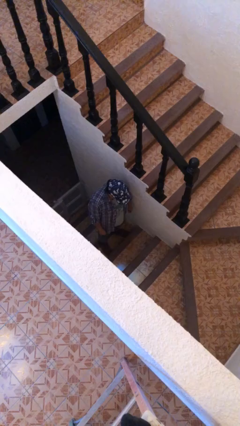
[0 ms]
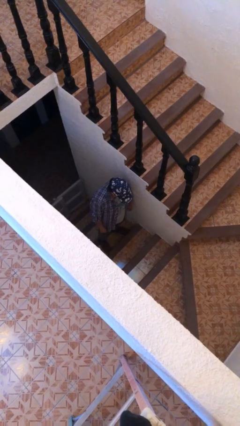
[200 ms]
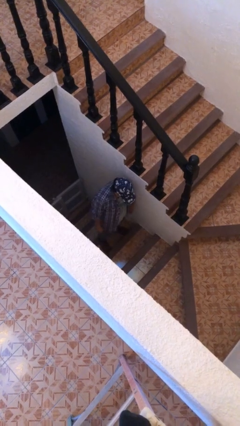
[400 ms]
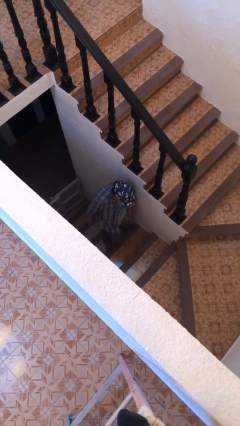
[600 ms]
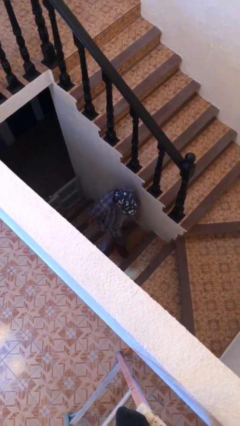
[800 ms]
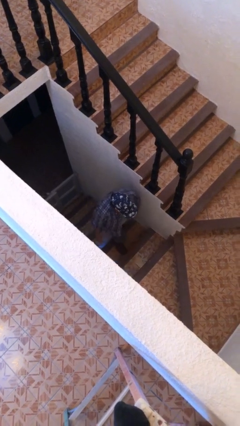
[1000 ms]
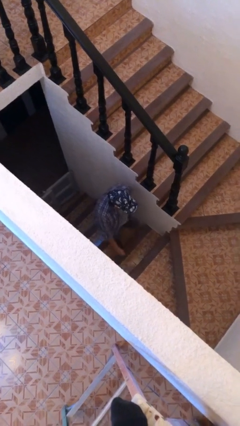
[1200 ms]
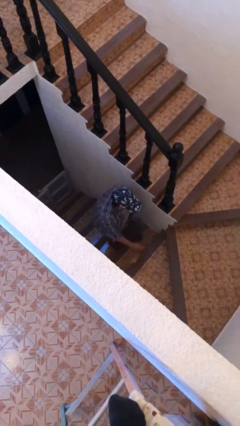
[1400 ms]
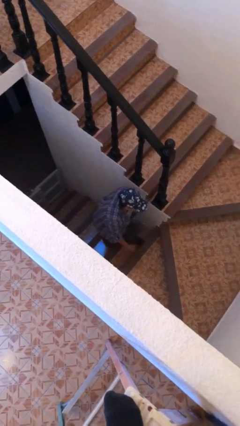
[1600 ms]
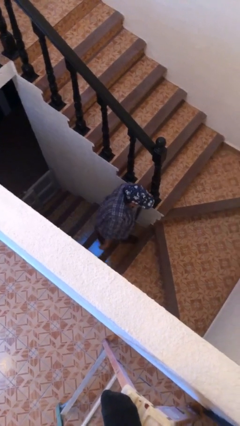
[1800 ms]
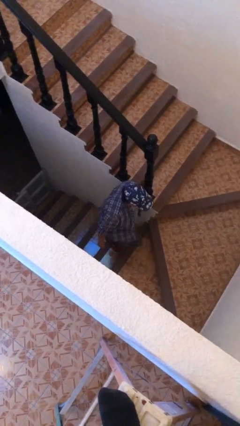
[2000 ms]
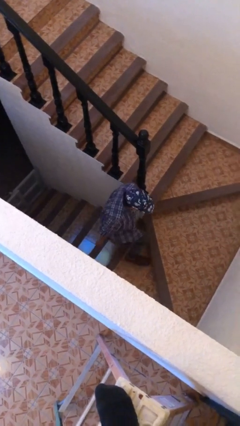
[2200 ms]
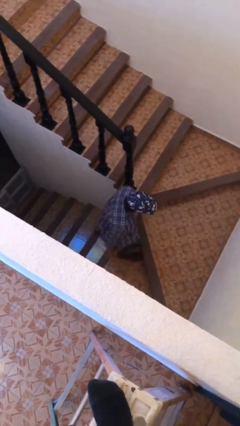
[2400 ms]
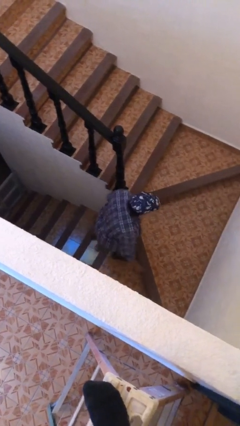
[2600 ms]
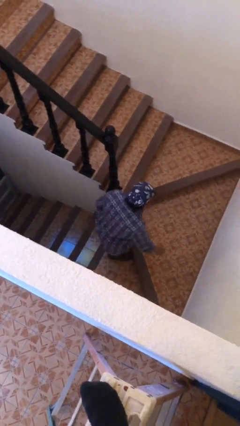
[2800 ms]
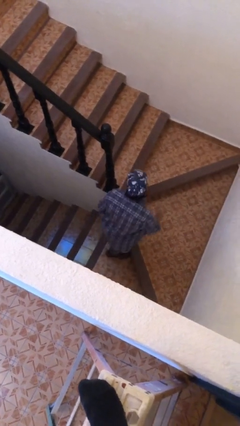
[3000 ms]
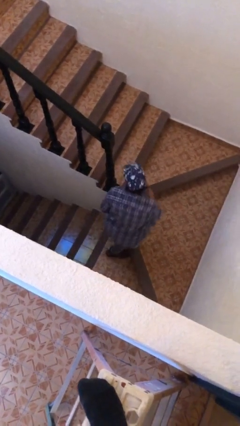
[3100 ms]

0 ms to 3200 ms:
person climbs up stairs

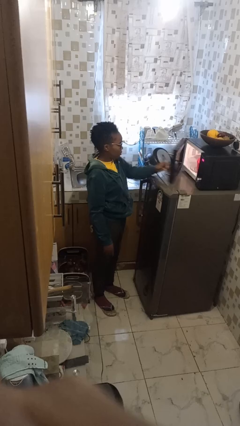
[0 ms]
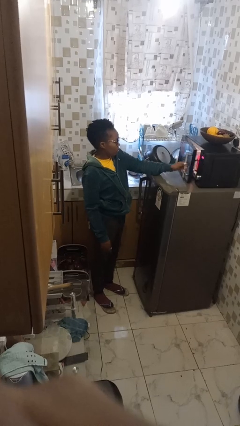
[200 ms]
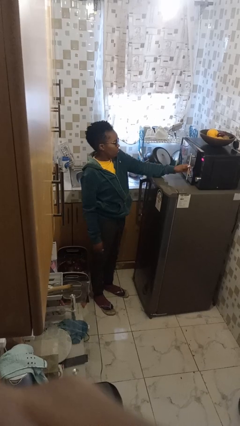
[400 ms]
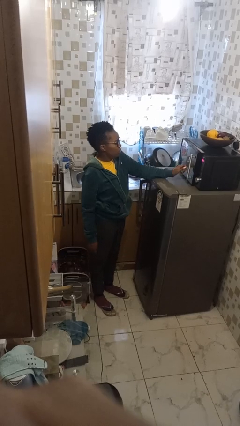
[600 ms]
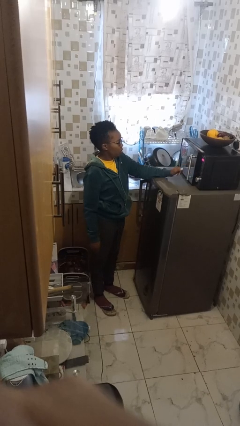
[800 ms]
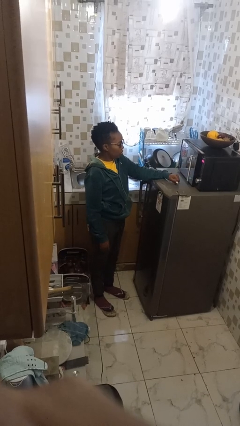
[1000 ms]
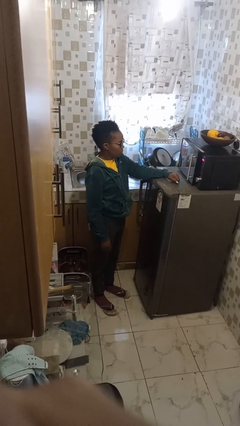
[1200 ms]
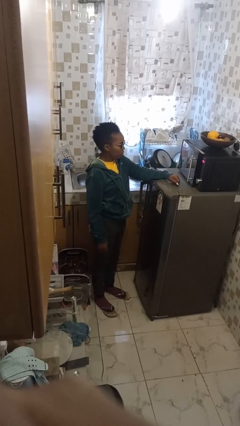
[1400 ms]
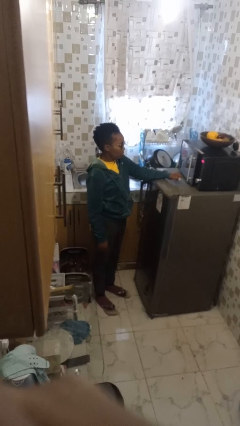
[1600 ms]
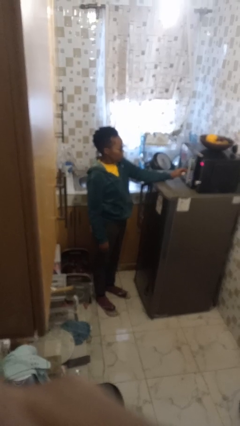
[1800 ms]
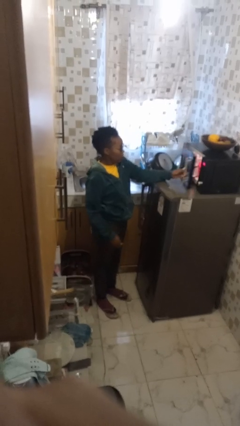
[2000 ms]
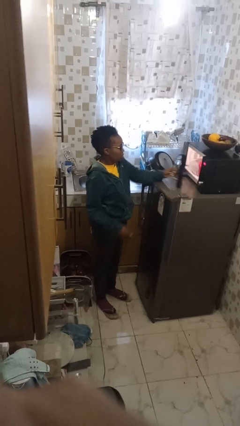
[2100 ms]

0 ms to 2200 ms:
person closes microwave

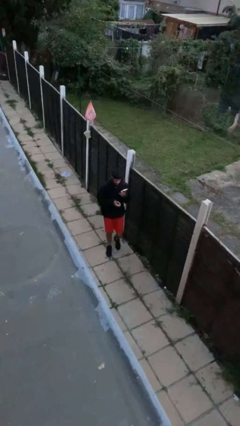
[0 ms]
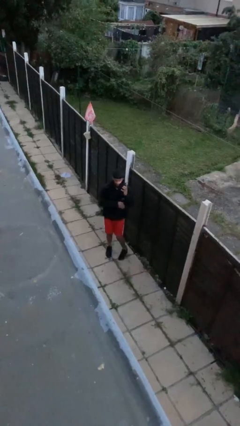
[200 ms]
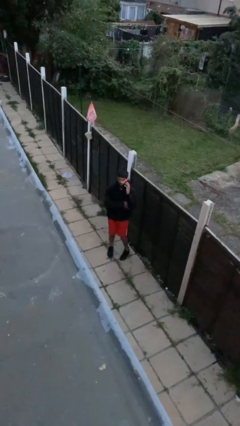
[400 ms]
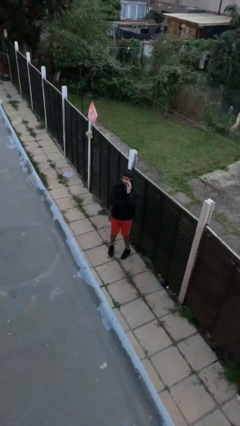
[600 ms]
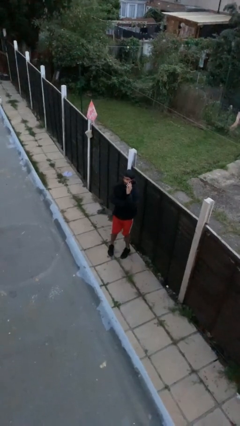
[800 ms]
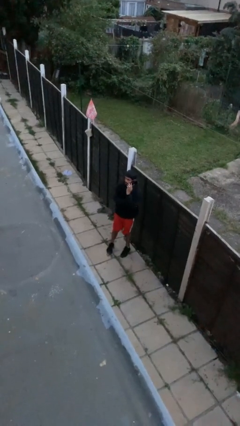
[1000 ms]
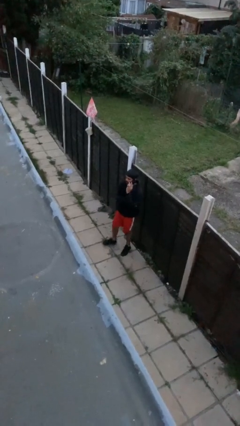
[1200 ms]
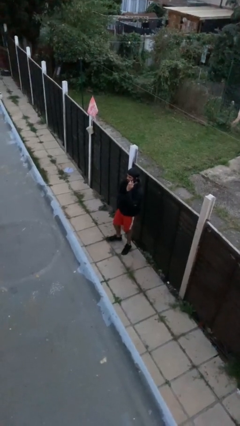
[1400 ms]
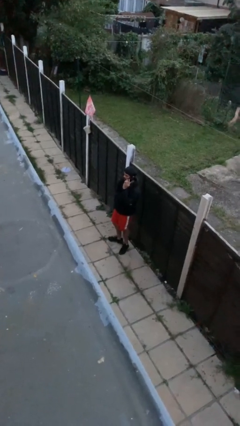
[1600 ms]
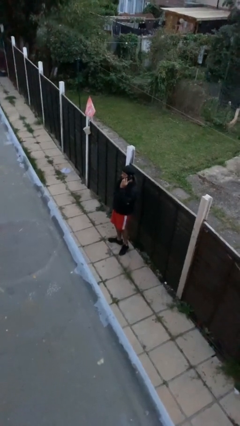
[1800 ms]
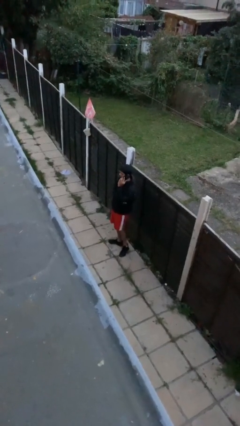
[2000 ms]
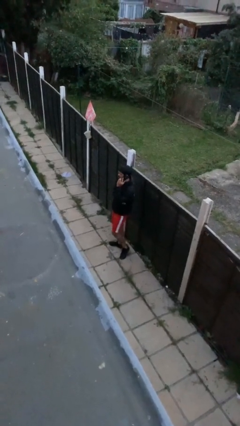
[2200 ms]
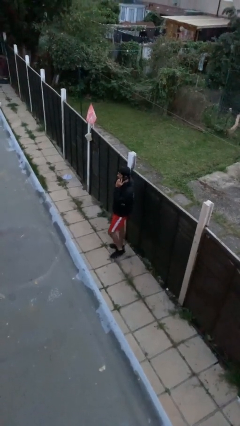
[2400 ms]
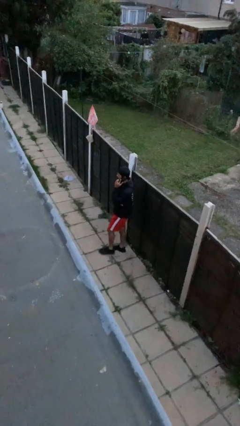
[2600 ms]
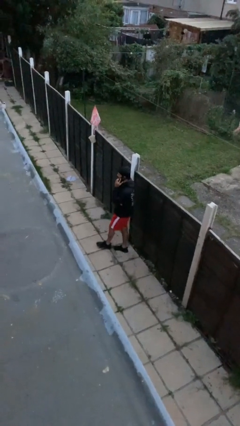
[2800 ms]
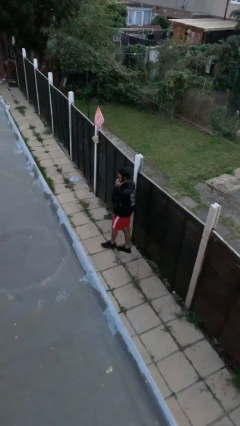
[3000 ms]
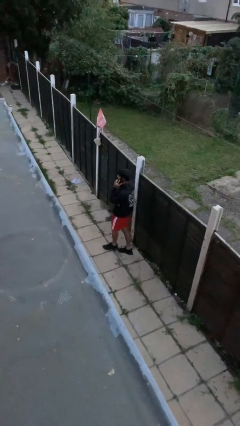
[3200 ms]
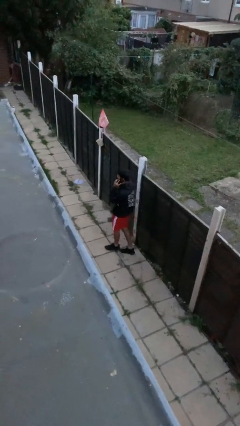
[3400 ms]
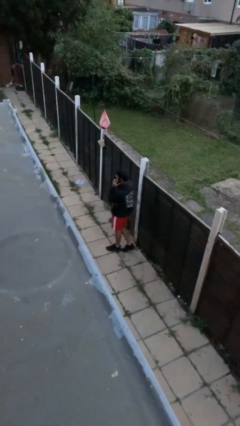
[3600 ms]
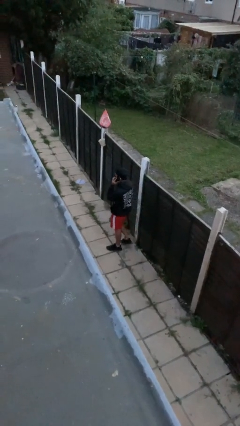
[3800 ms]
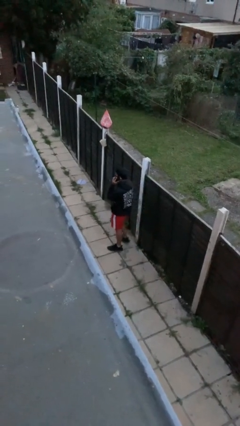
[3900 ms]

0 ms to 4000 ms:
person talks on phone

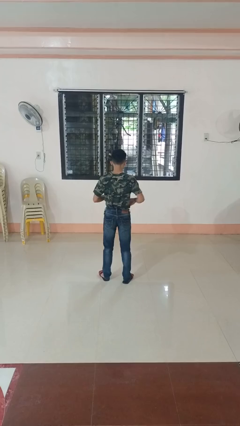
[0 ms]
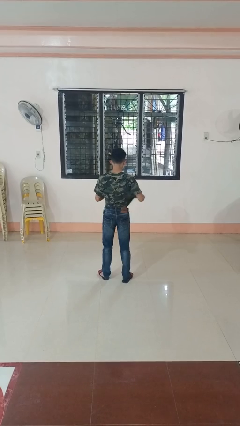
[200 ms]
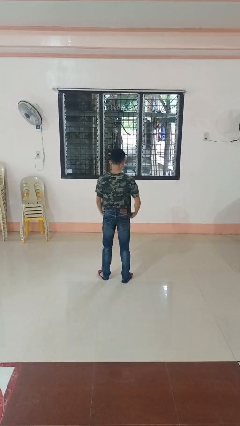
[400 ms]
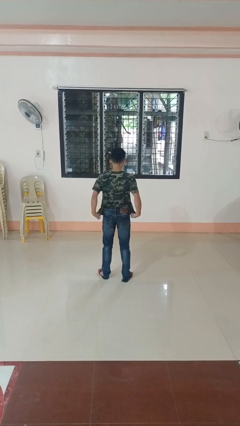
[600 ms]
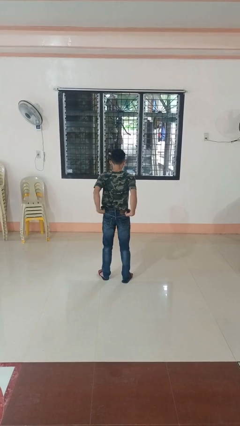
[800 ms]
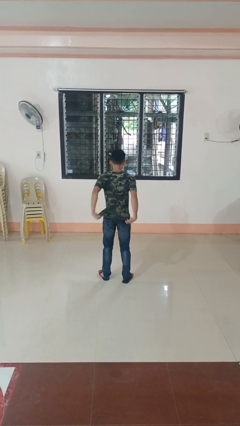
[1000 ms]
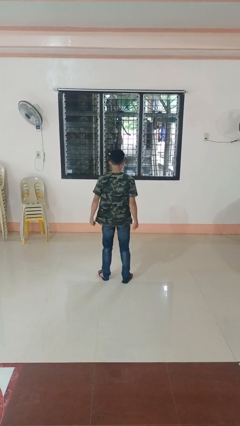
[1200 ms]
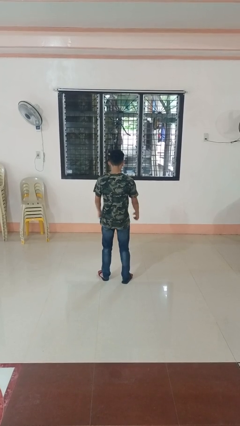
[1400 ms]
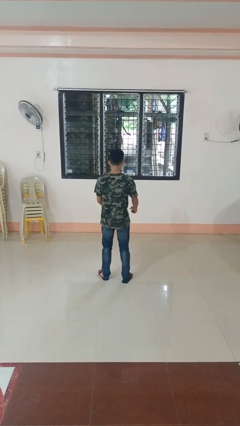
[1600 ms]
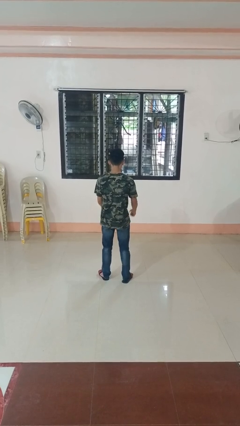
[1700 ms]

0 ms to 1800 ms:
person untucks shirt

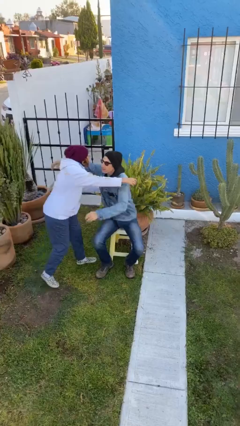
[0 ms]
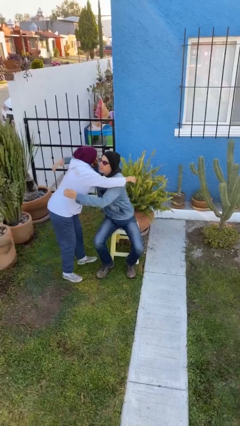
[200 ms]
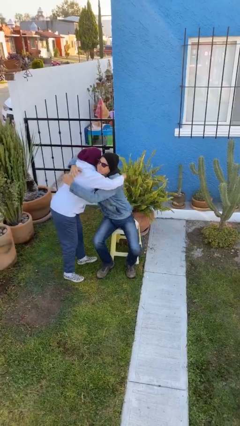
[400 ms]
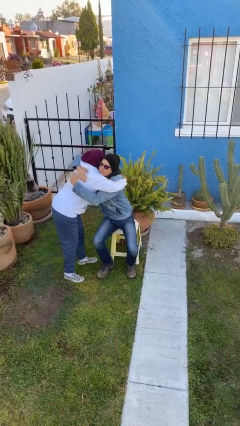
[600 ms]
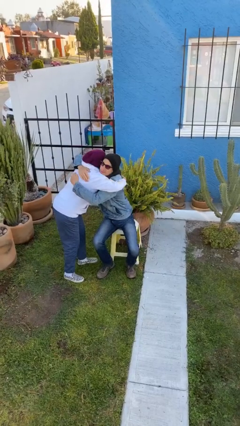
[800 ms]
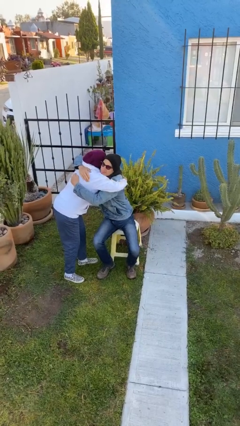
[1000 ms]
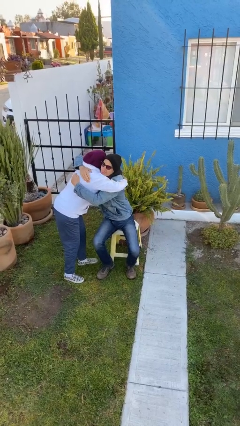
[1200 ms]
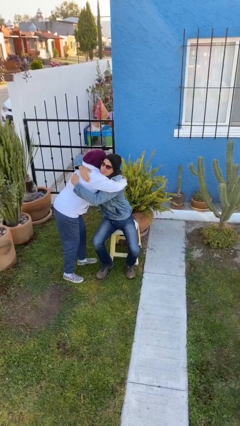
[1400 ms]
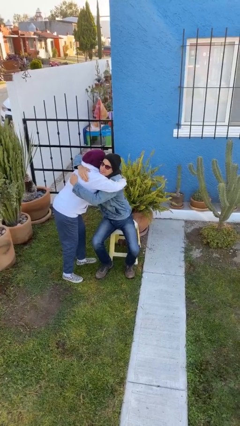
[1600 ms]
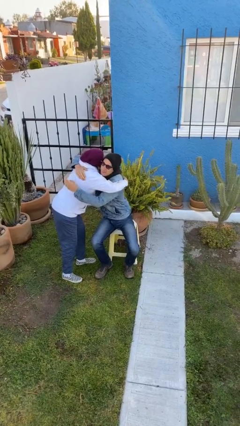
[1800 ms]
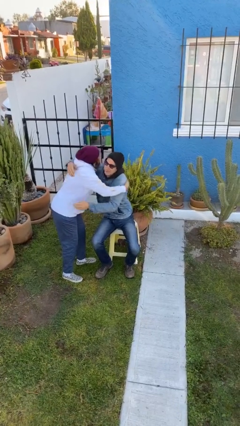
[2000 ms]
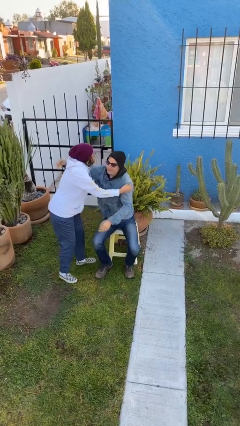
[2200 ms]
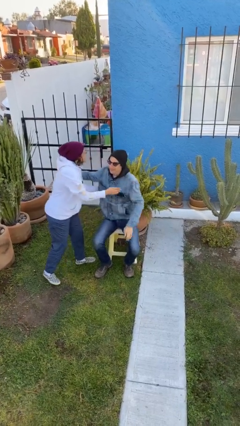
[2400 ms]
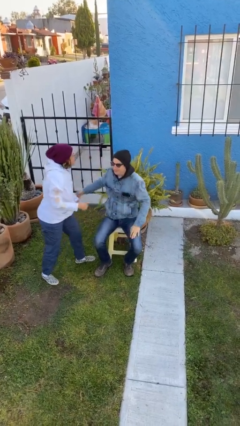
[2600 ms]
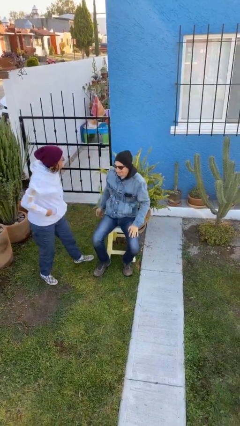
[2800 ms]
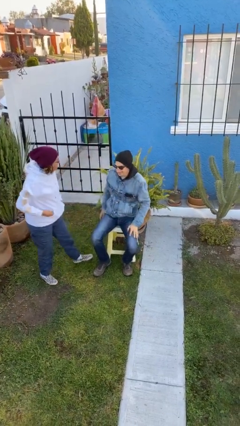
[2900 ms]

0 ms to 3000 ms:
person embraces person

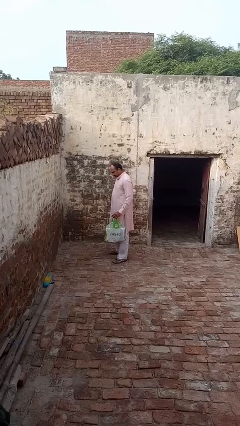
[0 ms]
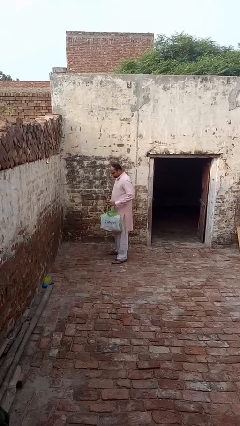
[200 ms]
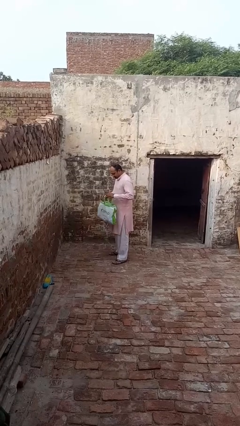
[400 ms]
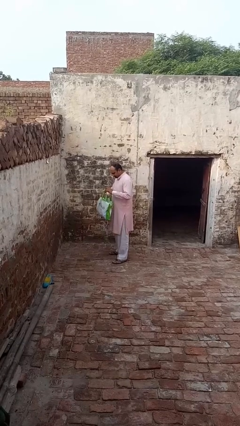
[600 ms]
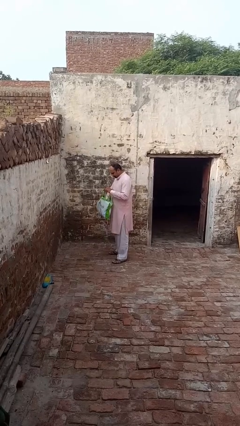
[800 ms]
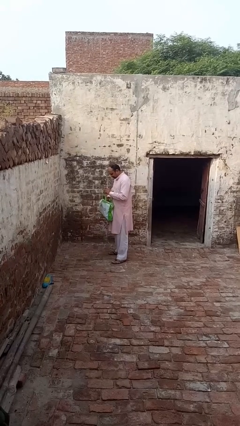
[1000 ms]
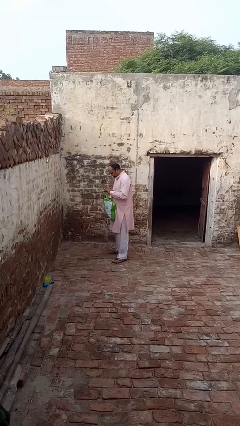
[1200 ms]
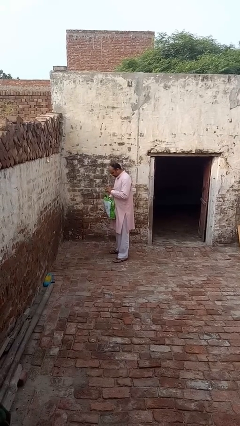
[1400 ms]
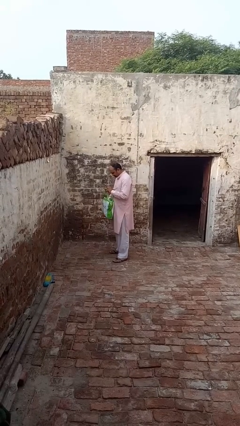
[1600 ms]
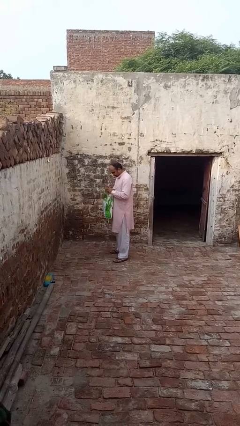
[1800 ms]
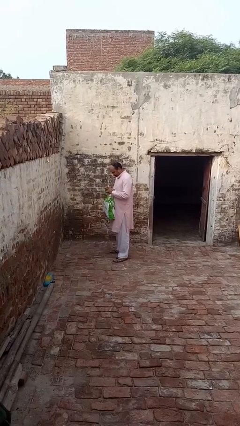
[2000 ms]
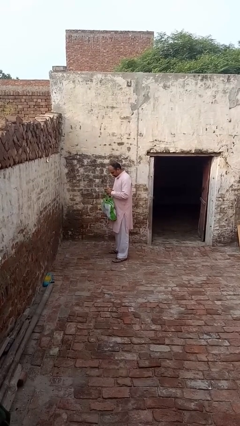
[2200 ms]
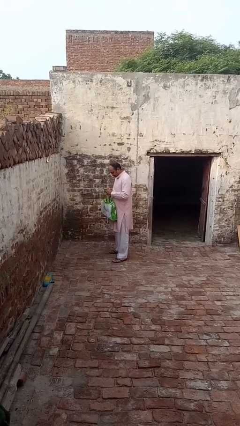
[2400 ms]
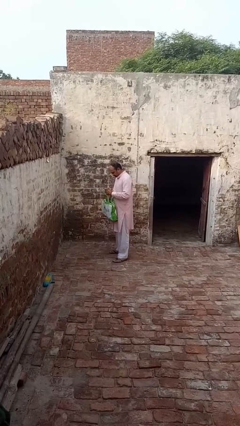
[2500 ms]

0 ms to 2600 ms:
person searches in bag

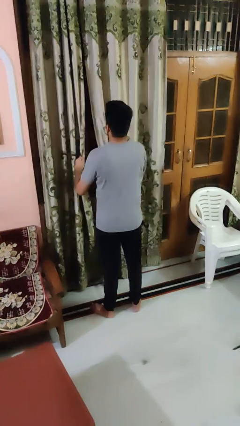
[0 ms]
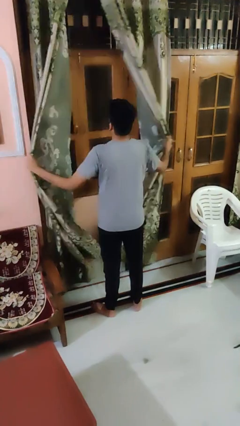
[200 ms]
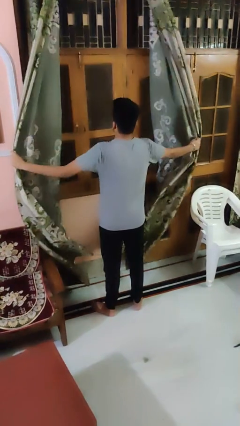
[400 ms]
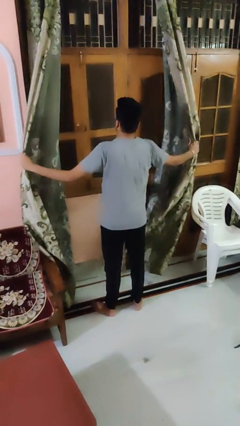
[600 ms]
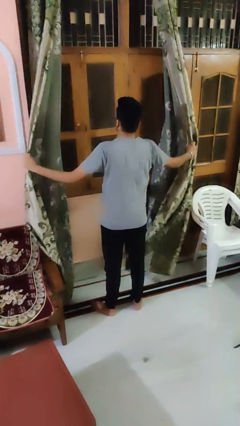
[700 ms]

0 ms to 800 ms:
person opens curtains
